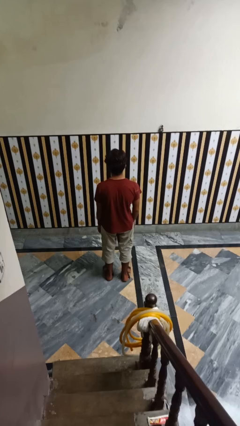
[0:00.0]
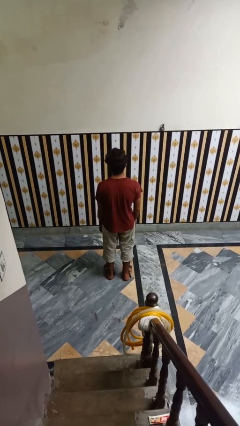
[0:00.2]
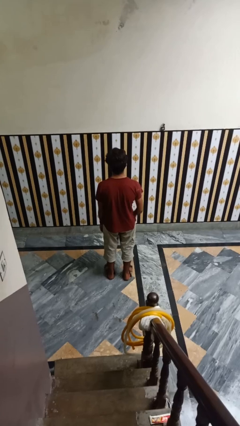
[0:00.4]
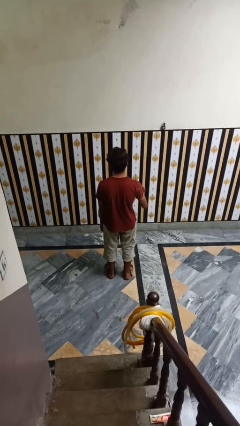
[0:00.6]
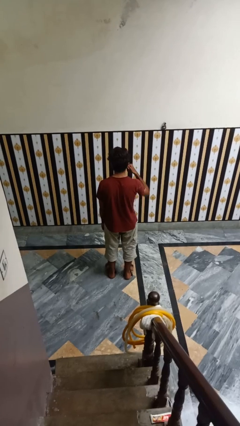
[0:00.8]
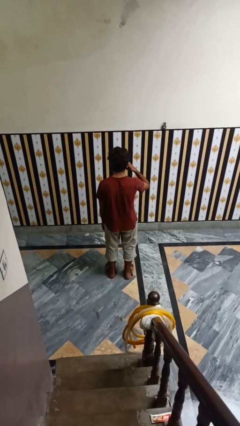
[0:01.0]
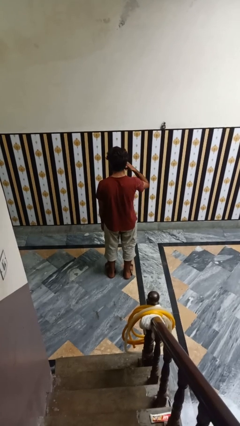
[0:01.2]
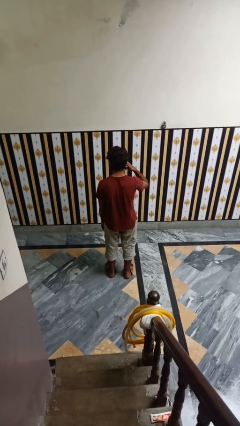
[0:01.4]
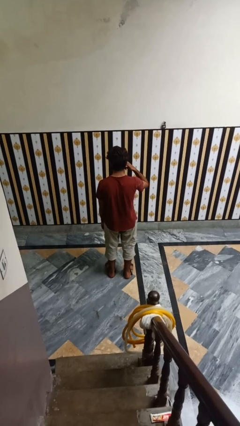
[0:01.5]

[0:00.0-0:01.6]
person gestures call me

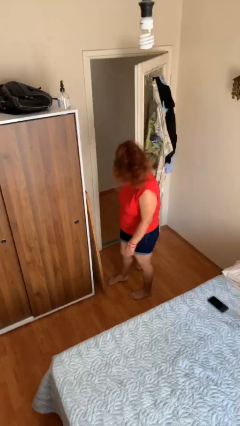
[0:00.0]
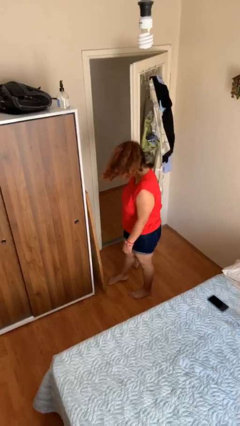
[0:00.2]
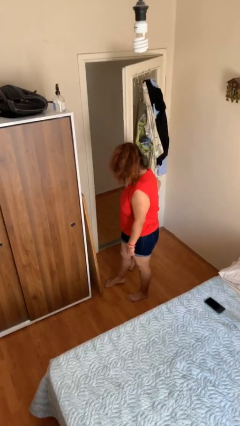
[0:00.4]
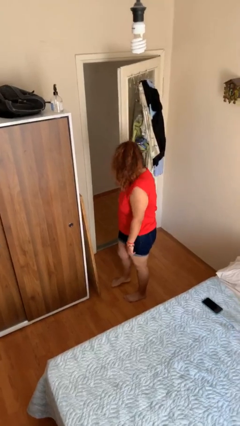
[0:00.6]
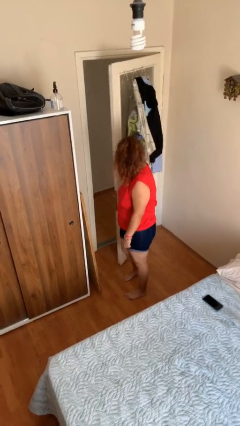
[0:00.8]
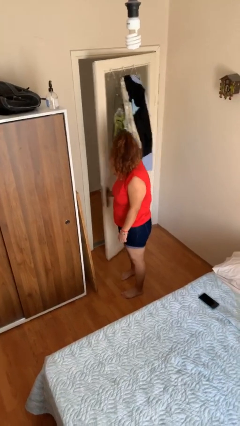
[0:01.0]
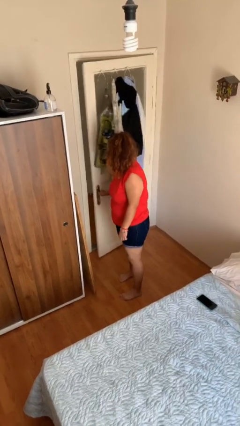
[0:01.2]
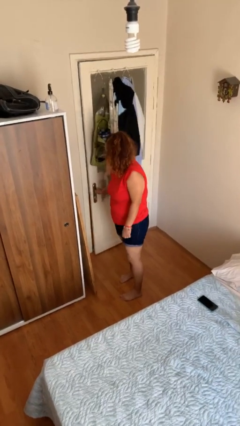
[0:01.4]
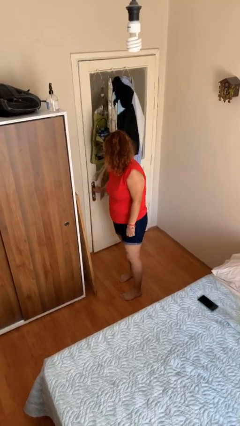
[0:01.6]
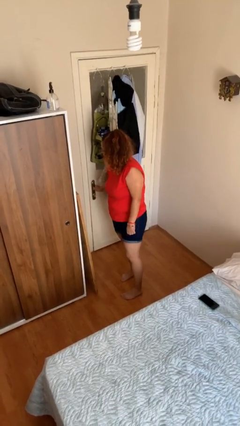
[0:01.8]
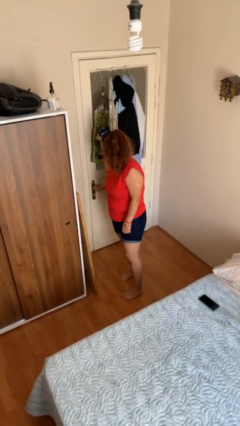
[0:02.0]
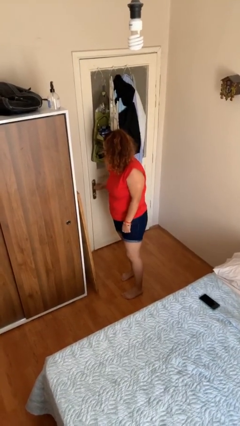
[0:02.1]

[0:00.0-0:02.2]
person closes facility door

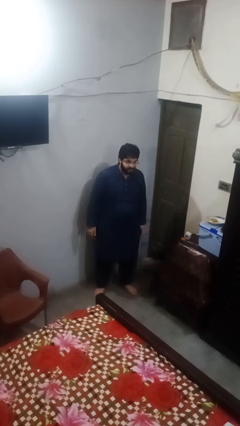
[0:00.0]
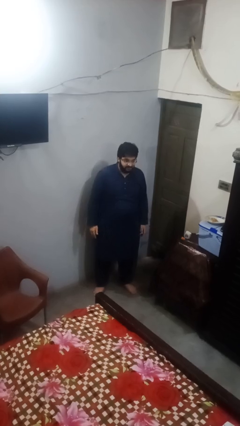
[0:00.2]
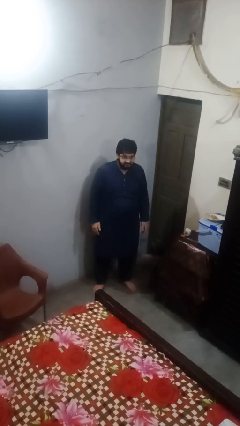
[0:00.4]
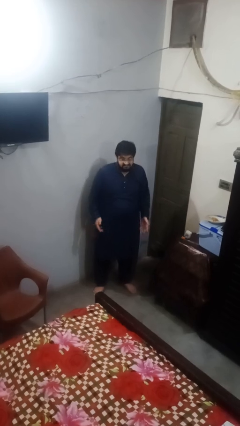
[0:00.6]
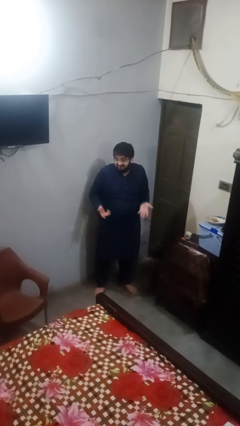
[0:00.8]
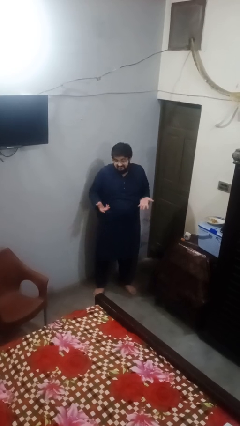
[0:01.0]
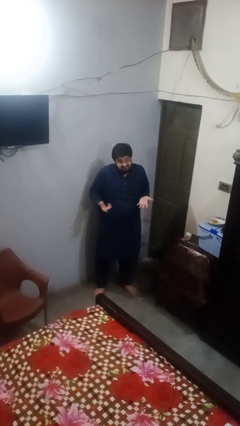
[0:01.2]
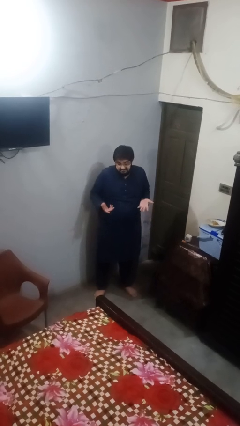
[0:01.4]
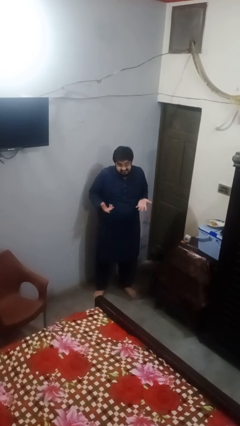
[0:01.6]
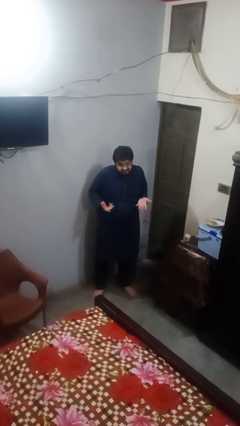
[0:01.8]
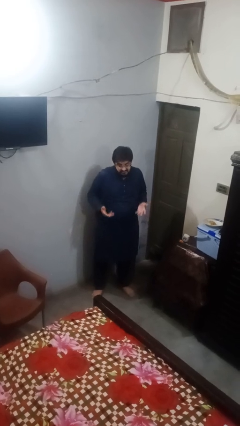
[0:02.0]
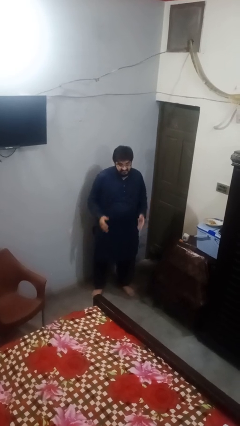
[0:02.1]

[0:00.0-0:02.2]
person shrugs

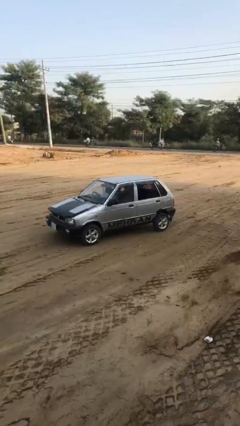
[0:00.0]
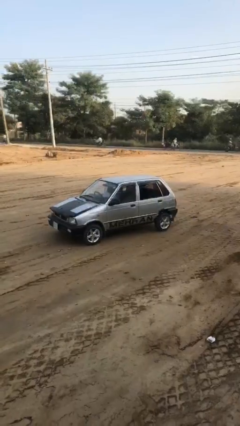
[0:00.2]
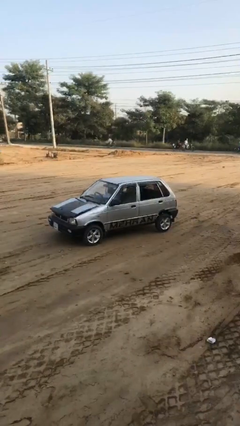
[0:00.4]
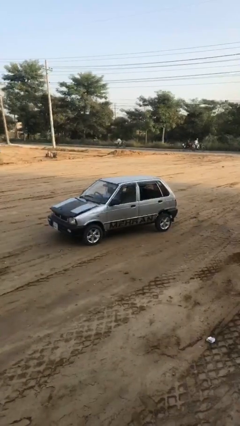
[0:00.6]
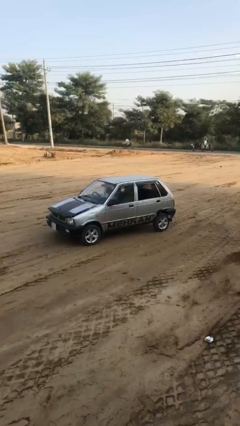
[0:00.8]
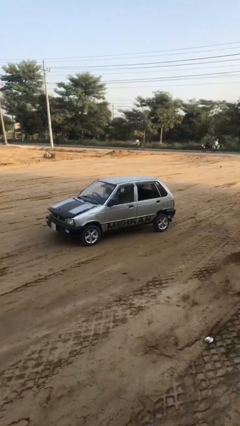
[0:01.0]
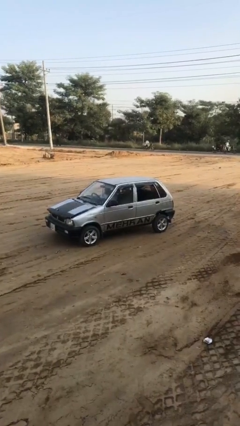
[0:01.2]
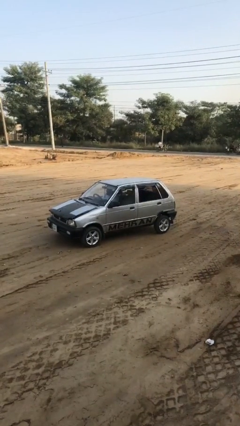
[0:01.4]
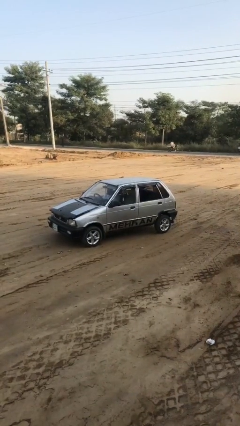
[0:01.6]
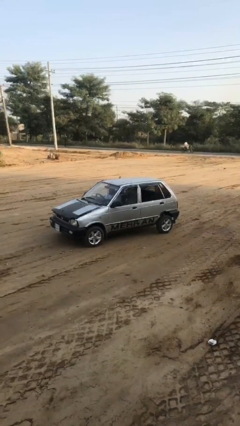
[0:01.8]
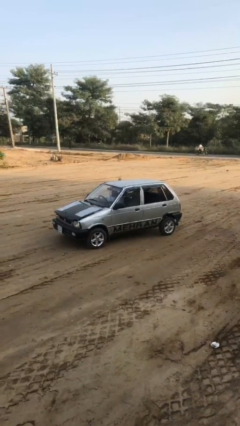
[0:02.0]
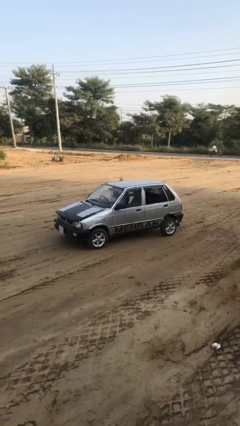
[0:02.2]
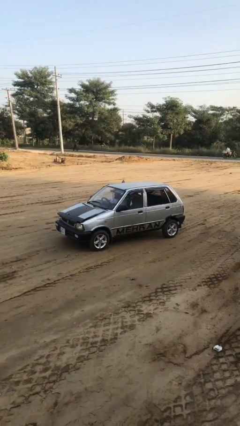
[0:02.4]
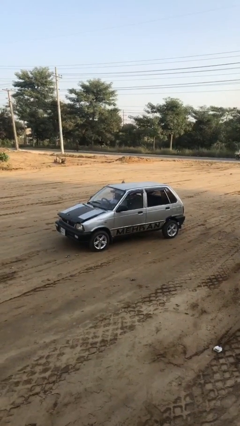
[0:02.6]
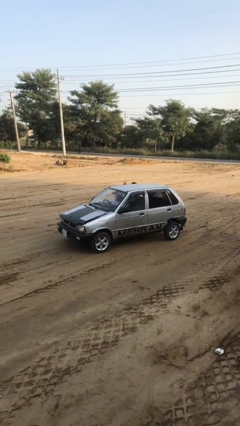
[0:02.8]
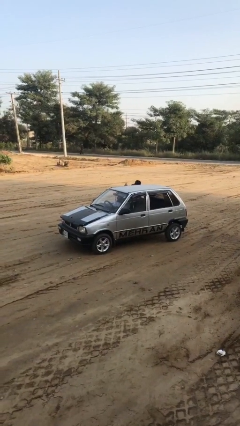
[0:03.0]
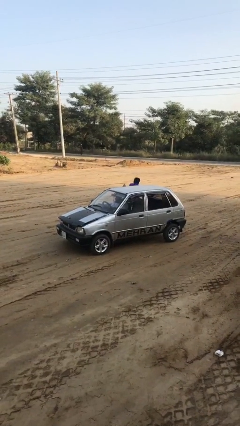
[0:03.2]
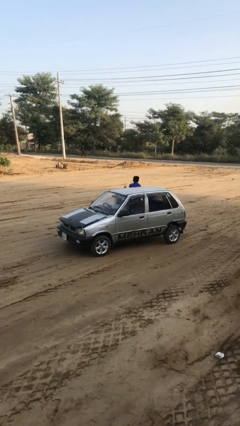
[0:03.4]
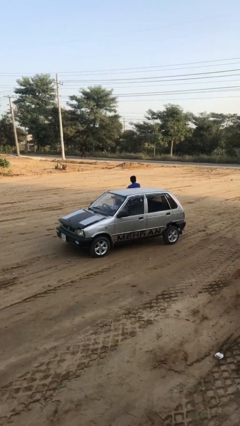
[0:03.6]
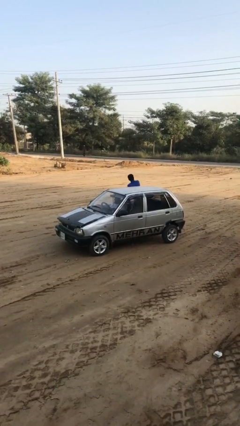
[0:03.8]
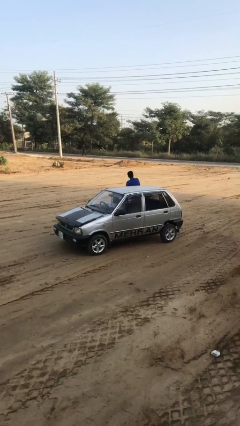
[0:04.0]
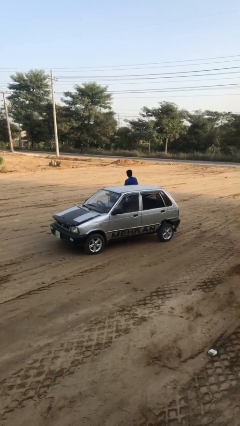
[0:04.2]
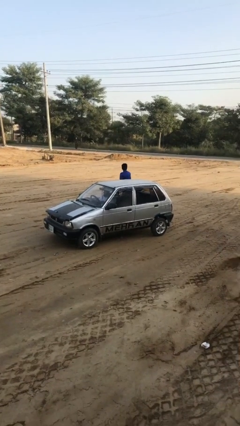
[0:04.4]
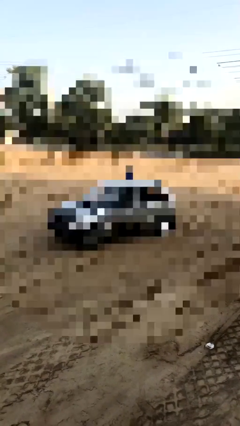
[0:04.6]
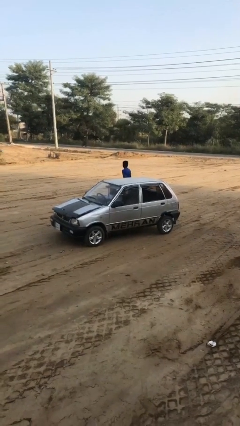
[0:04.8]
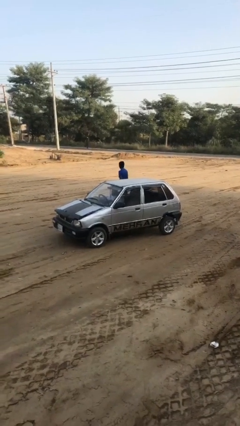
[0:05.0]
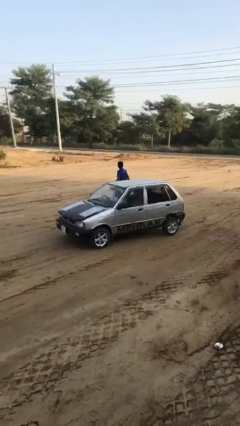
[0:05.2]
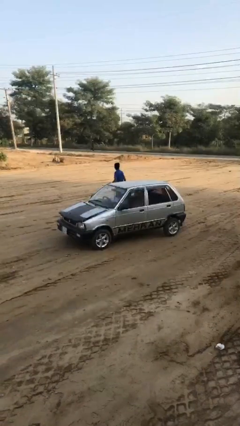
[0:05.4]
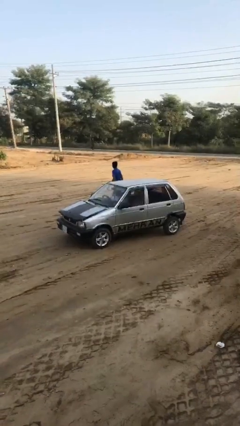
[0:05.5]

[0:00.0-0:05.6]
car drops off person

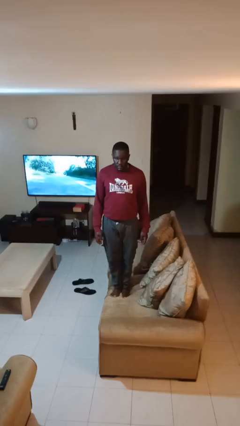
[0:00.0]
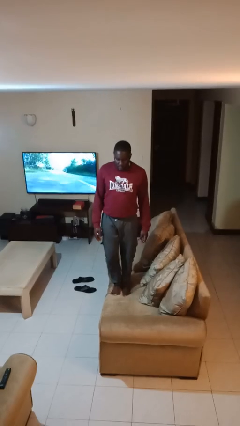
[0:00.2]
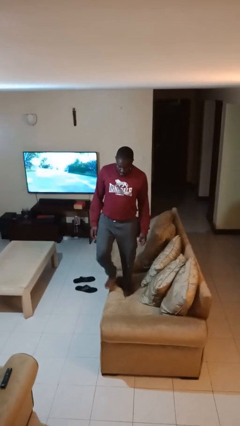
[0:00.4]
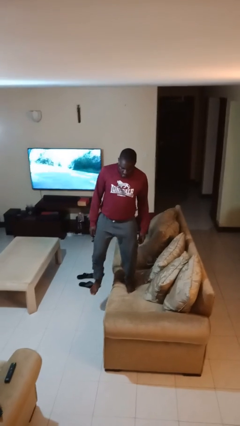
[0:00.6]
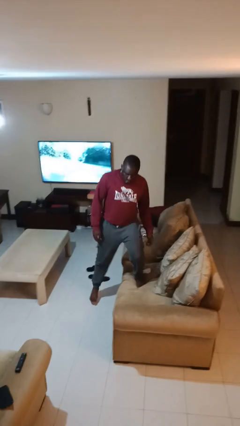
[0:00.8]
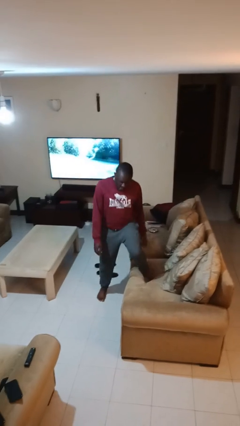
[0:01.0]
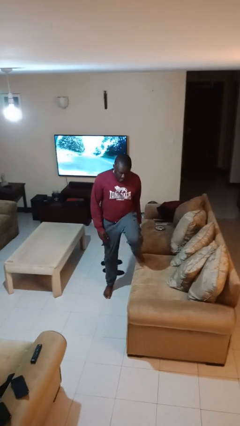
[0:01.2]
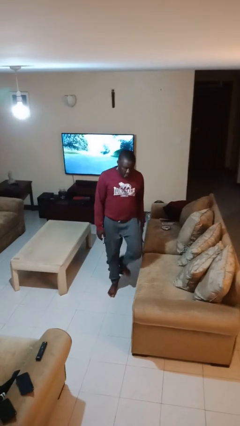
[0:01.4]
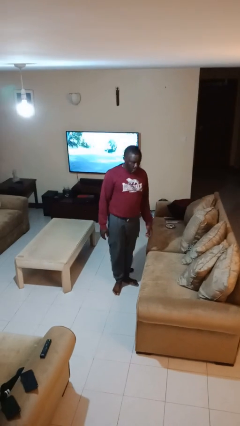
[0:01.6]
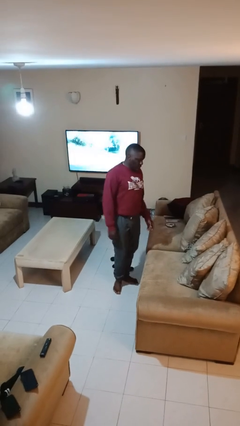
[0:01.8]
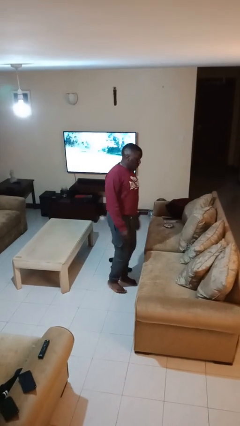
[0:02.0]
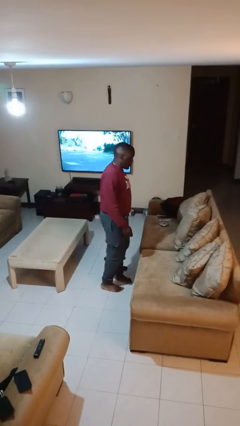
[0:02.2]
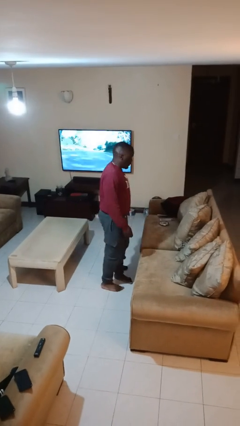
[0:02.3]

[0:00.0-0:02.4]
person climbs off couch

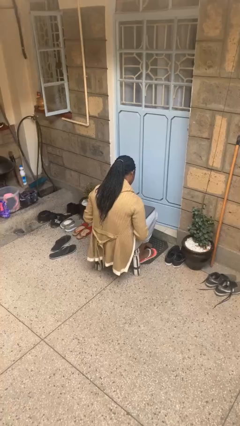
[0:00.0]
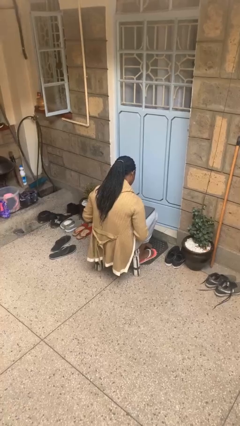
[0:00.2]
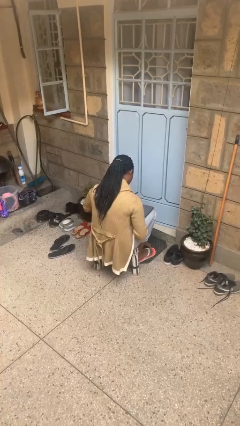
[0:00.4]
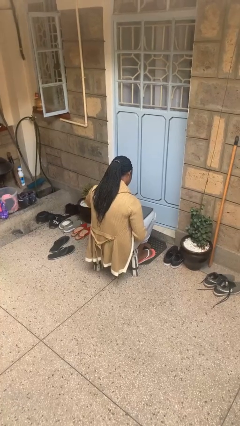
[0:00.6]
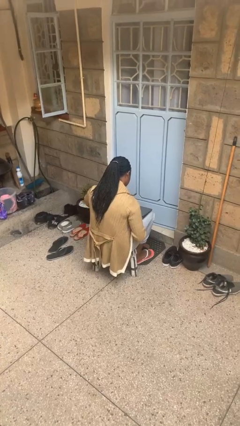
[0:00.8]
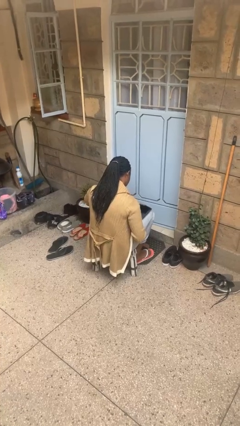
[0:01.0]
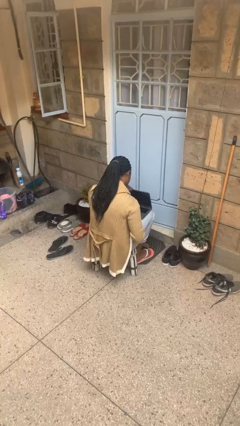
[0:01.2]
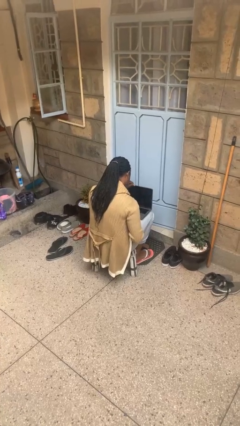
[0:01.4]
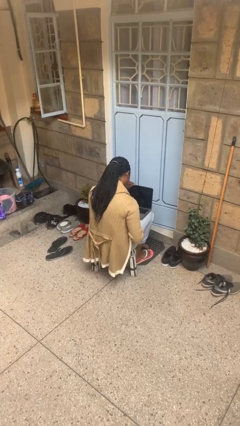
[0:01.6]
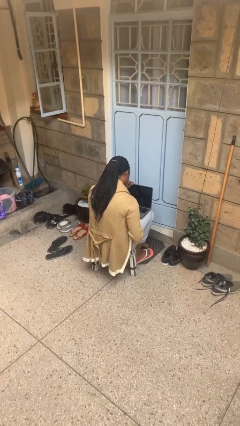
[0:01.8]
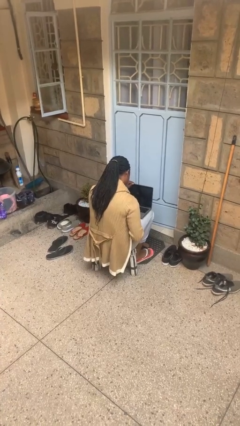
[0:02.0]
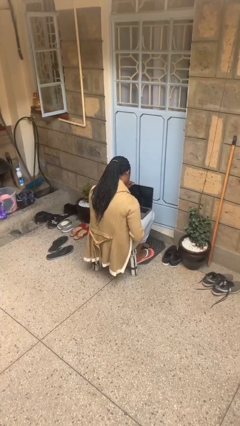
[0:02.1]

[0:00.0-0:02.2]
person opens laptop

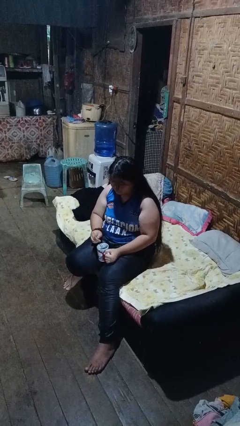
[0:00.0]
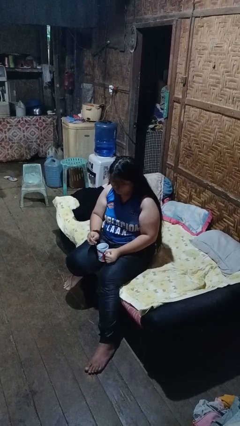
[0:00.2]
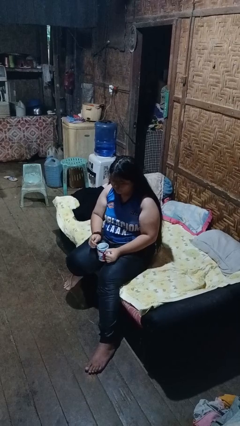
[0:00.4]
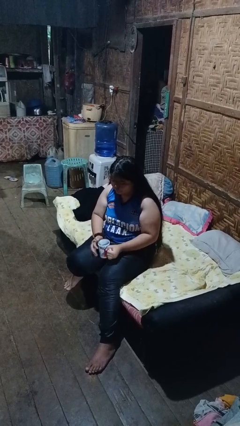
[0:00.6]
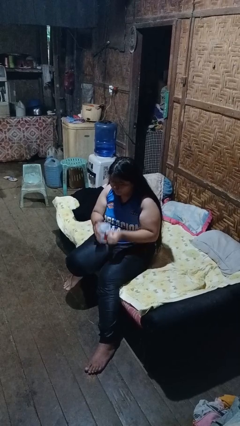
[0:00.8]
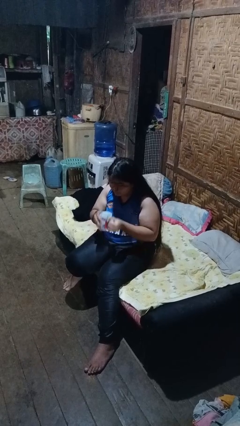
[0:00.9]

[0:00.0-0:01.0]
person stirs mug
